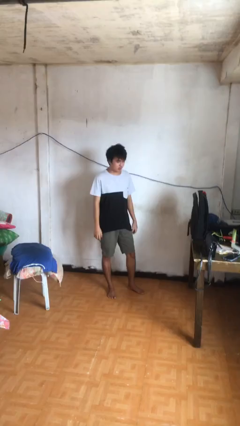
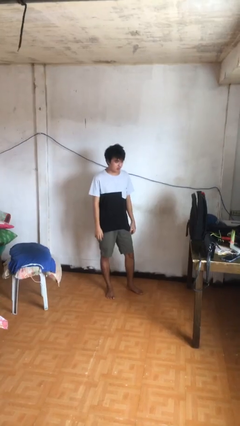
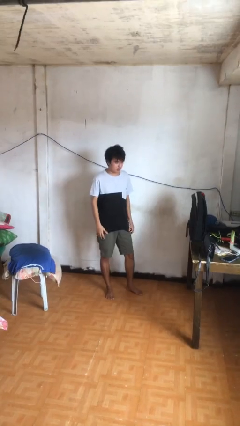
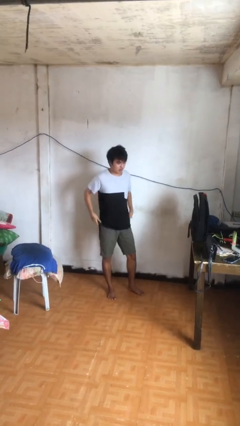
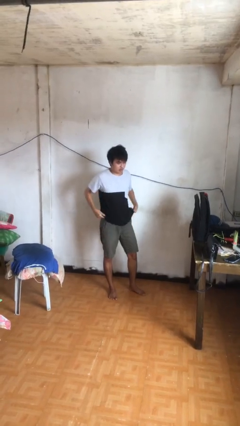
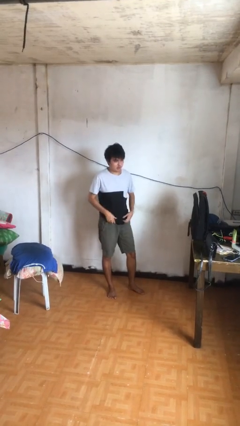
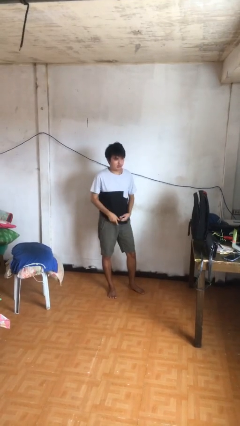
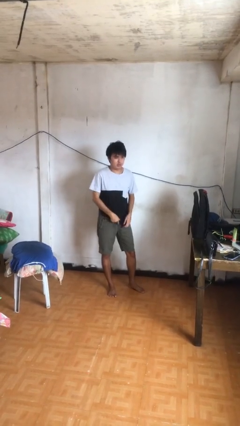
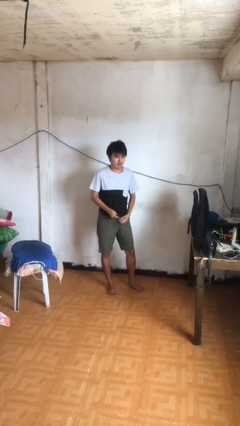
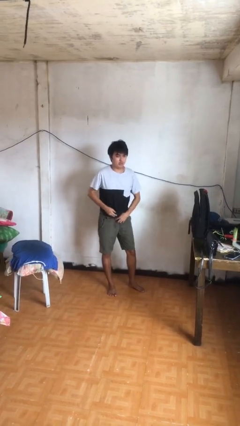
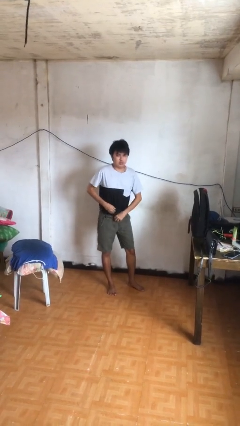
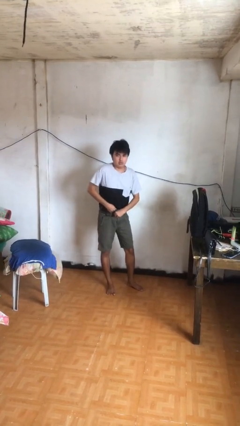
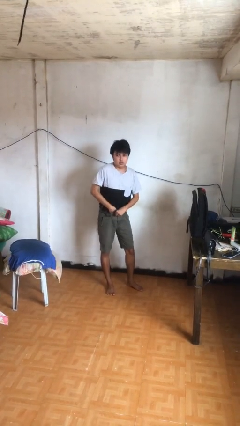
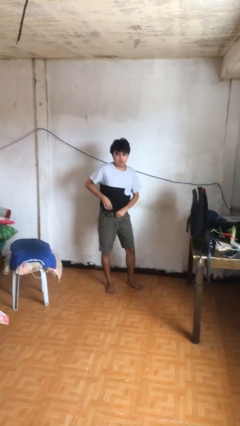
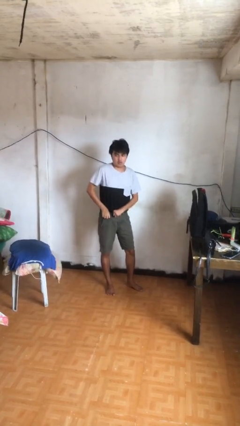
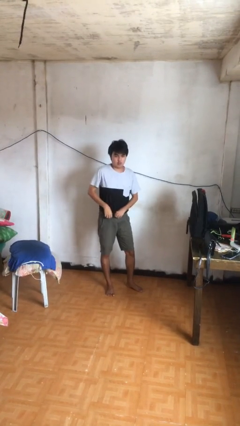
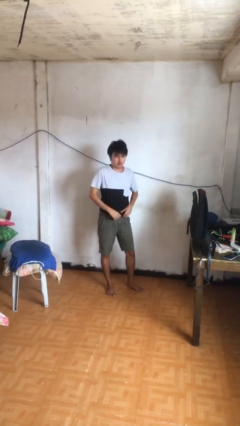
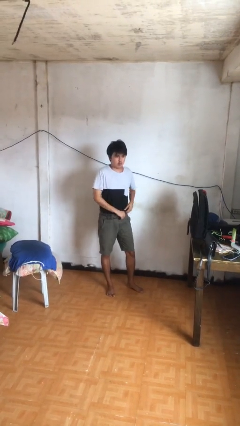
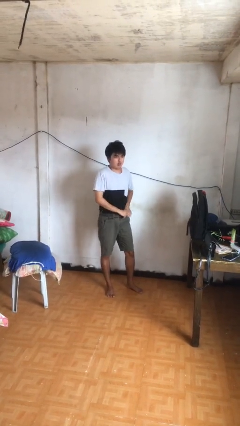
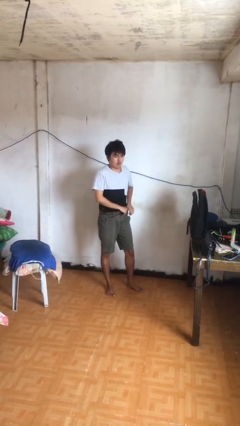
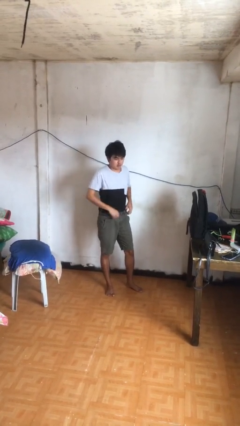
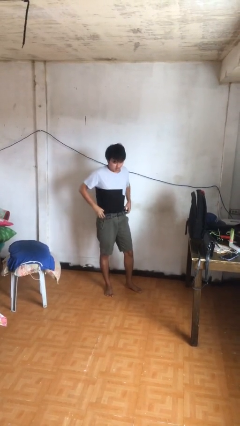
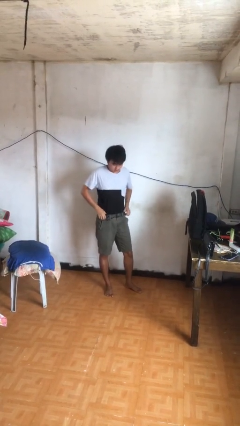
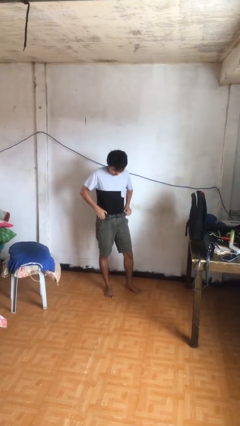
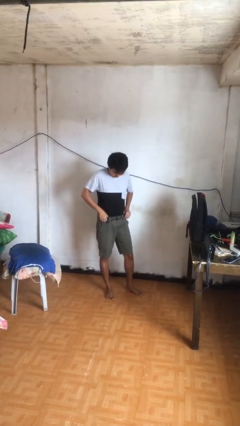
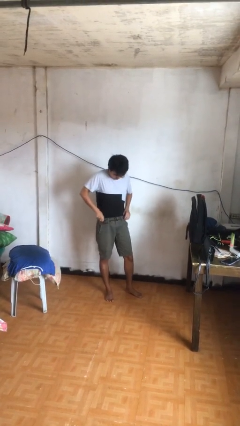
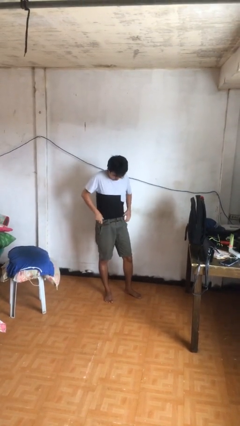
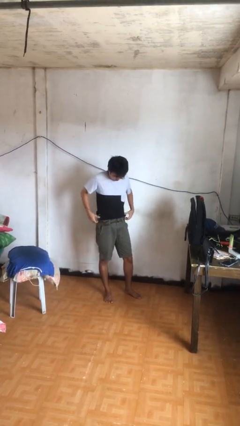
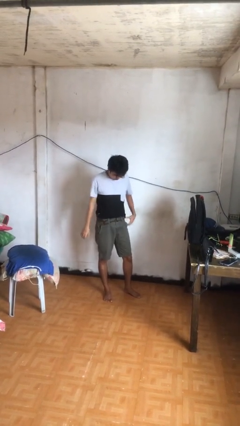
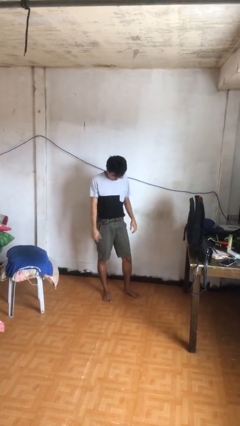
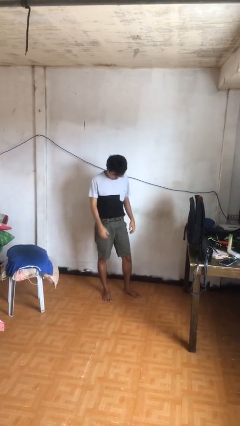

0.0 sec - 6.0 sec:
person tucks in shirt

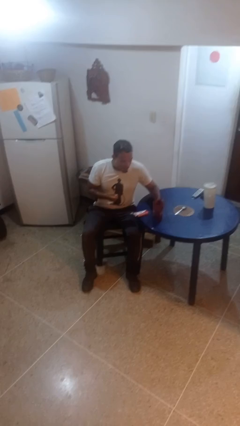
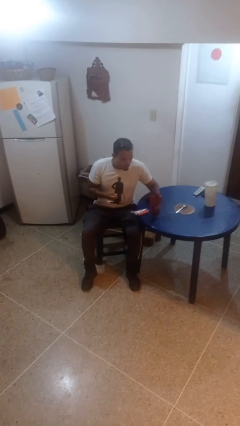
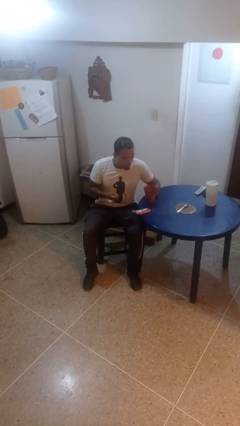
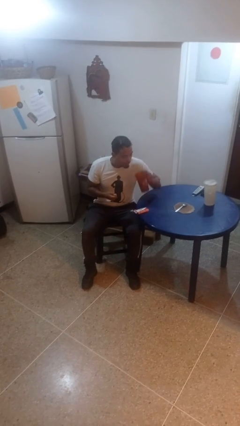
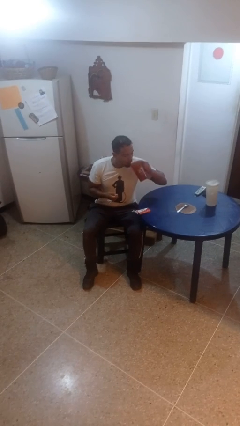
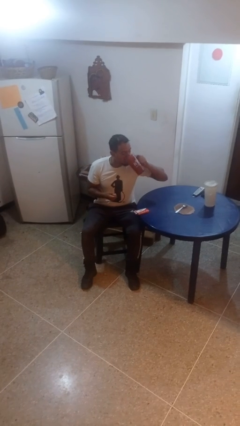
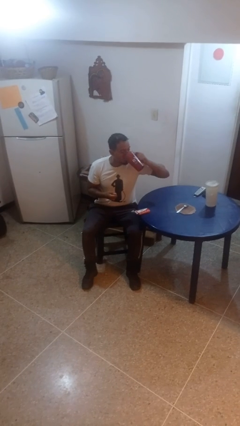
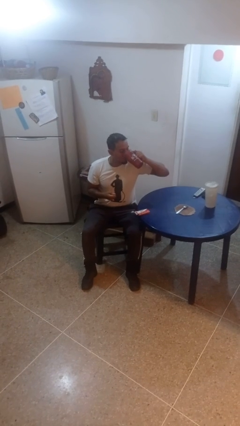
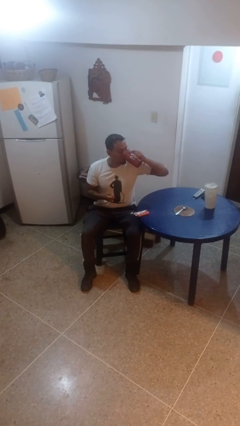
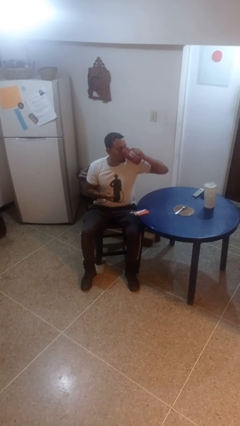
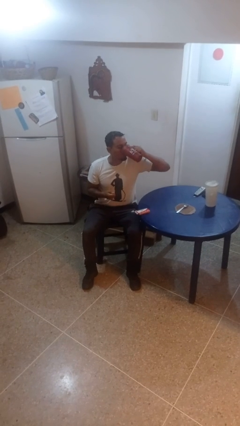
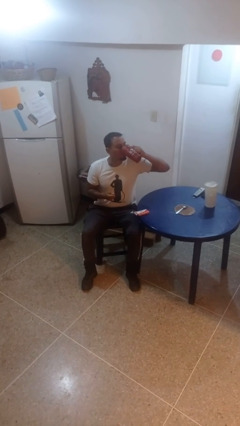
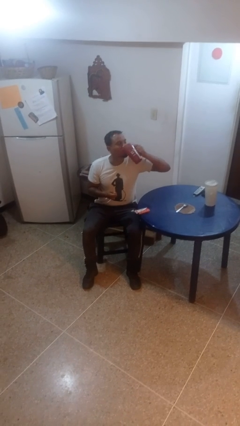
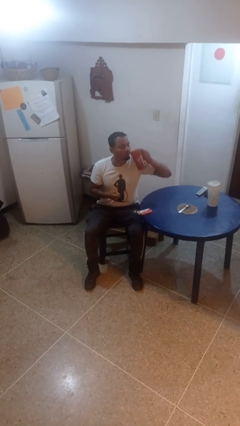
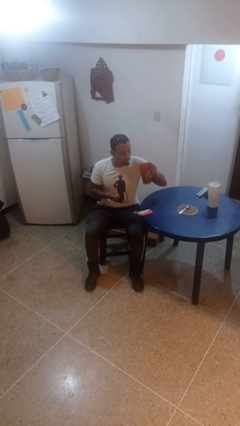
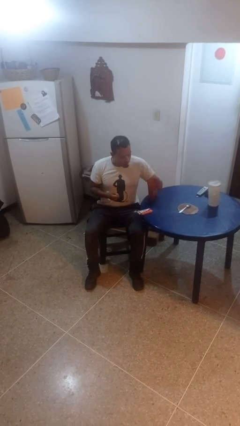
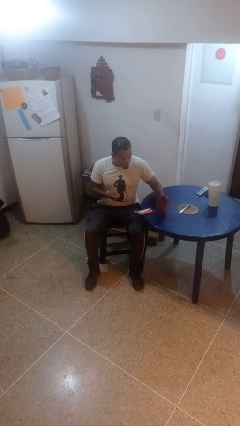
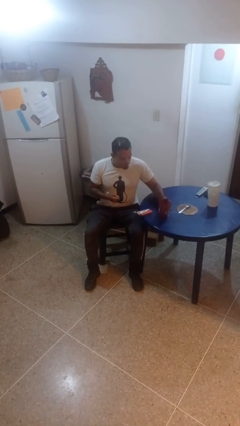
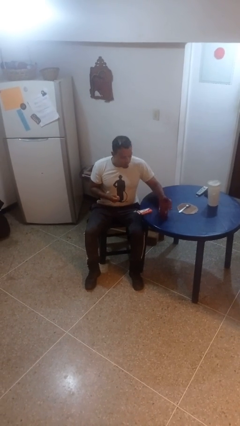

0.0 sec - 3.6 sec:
person drinks from cup

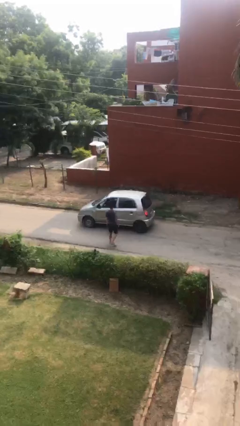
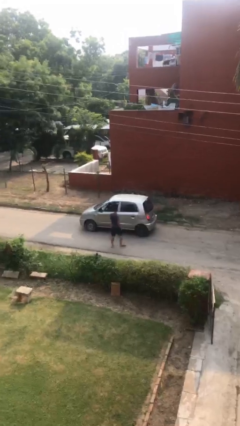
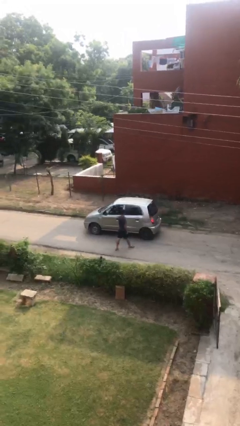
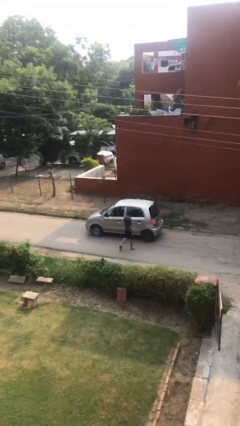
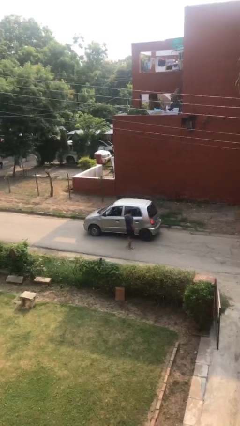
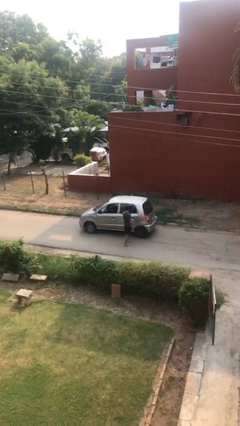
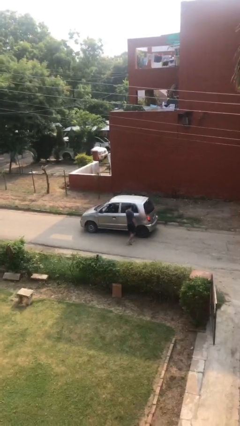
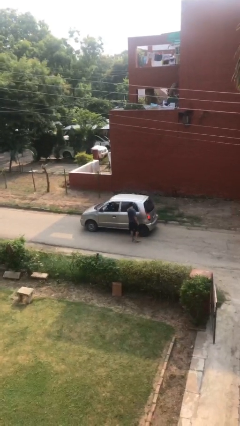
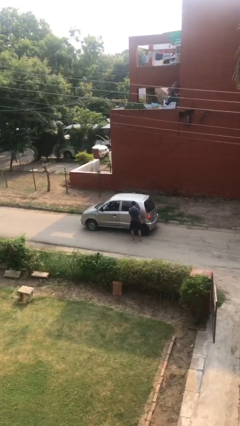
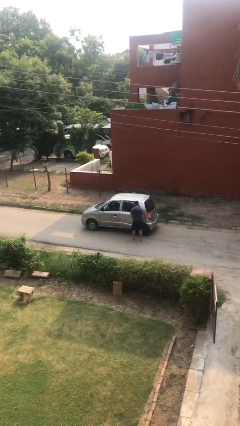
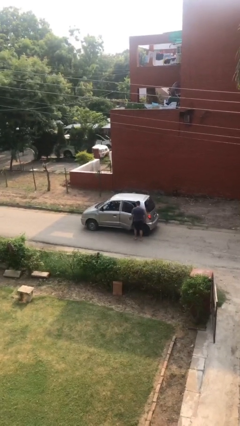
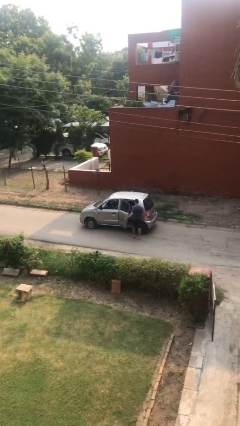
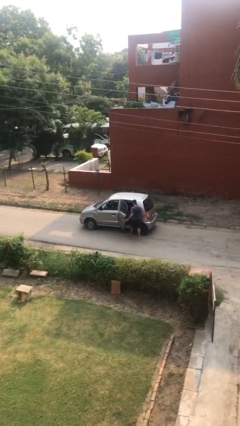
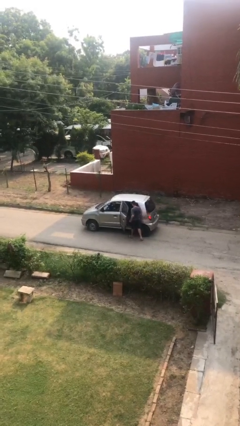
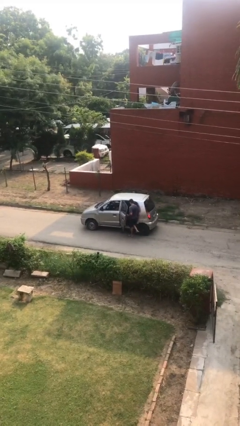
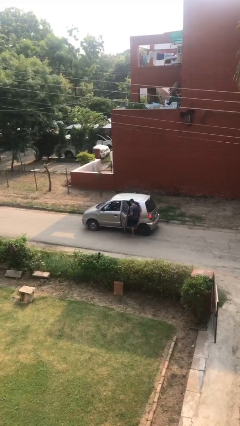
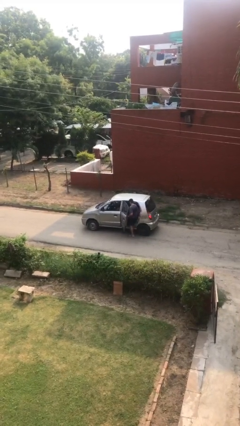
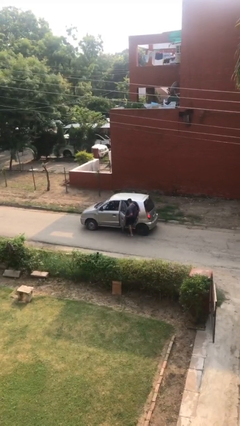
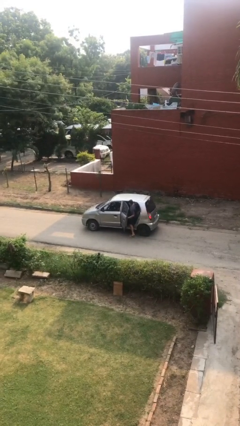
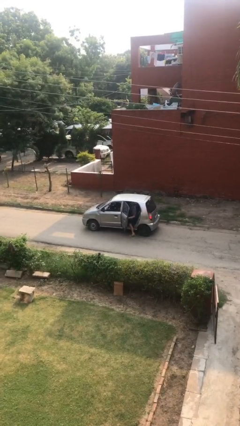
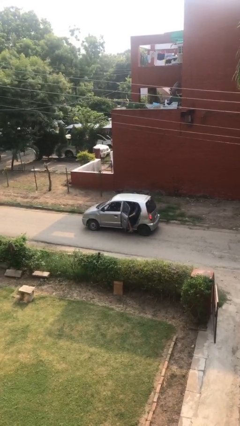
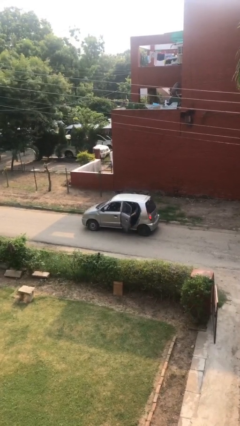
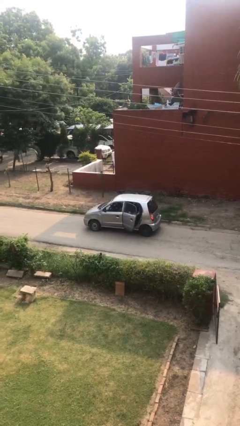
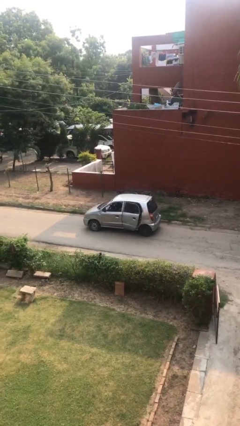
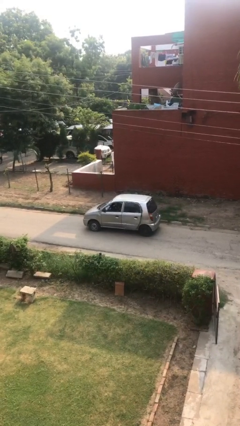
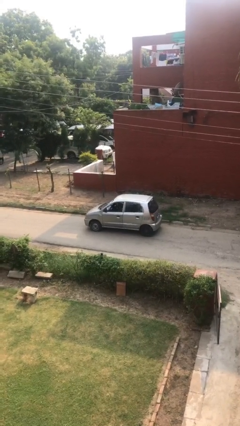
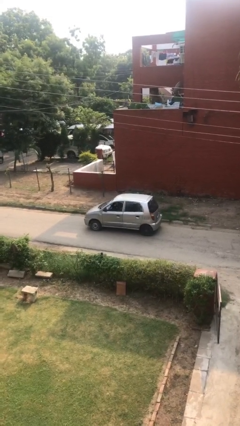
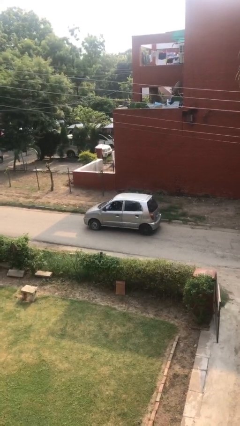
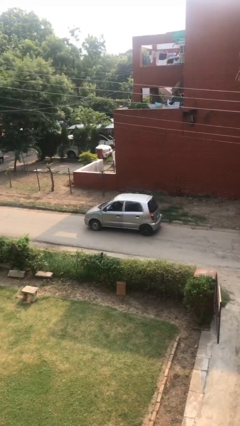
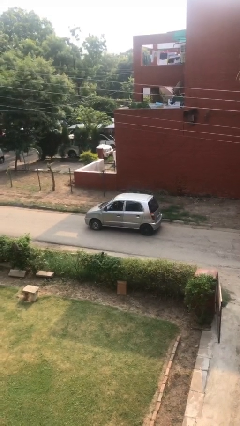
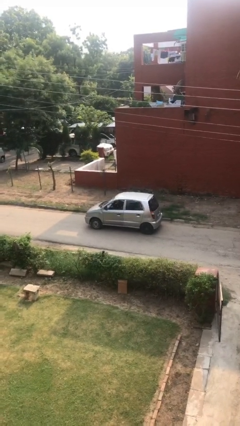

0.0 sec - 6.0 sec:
car picks up person

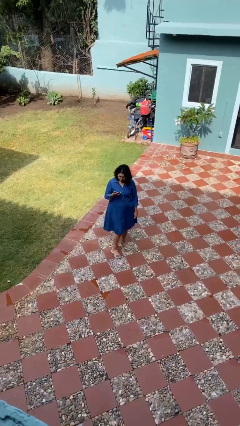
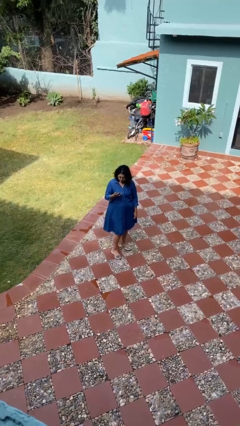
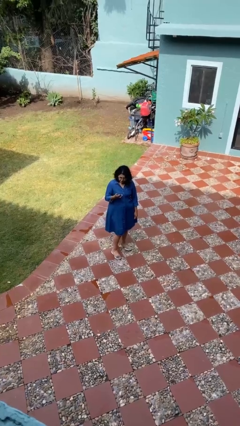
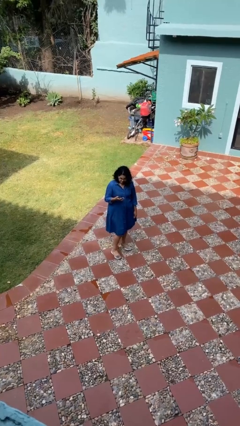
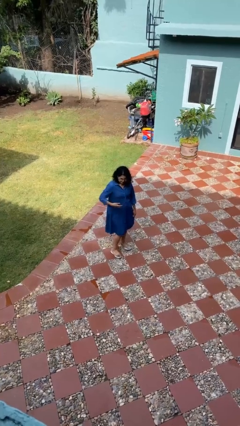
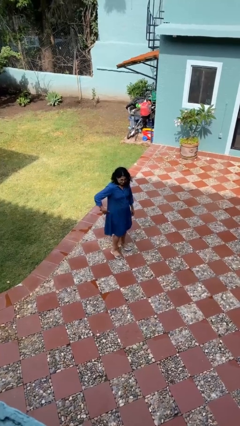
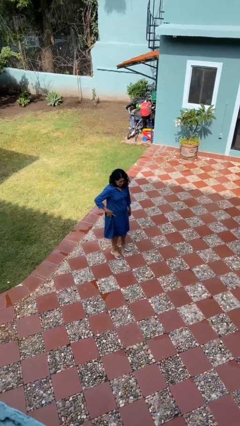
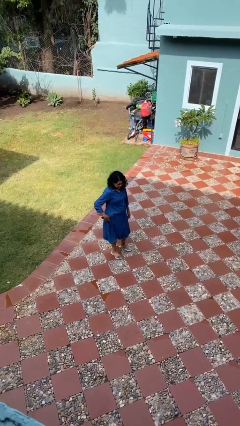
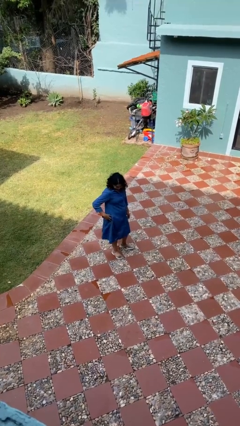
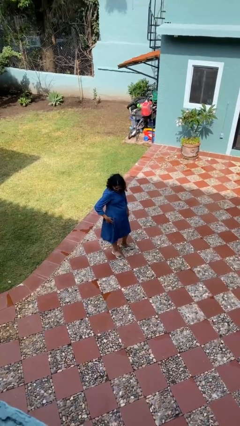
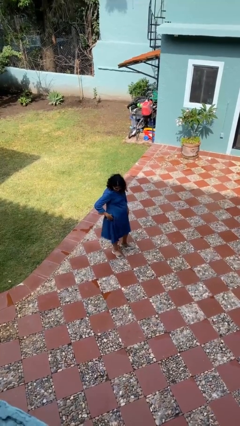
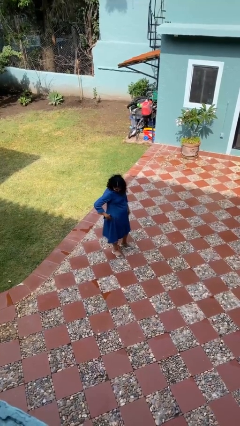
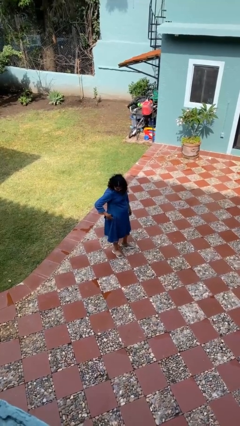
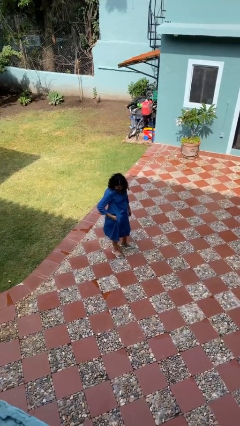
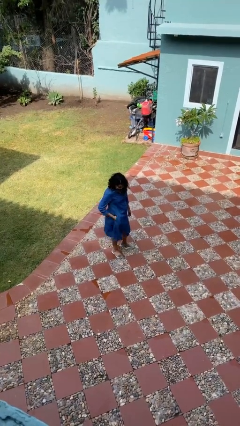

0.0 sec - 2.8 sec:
person puts phone into pocket
